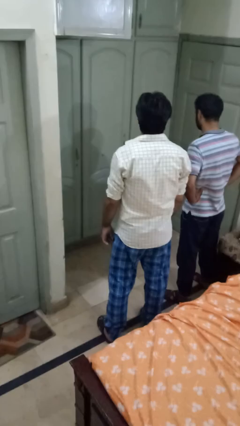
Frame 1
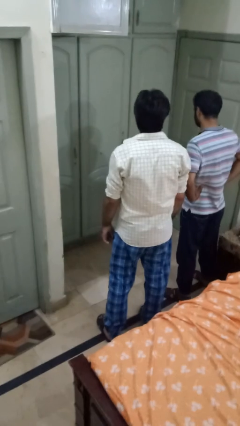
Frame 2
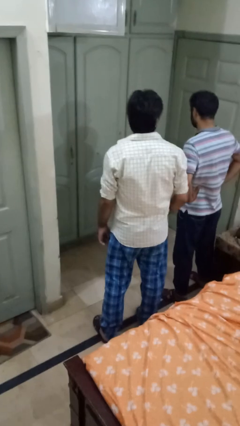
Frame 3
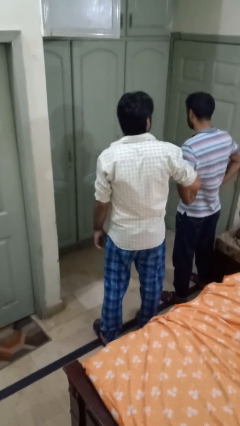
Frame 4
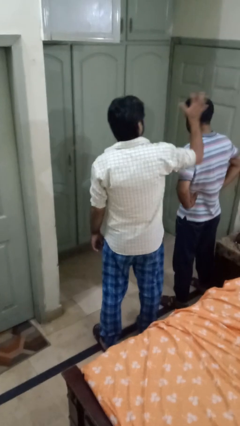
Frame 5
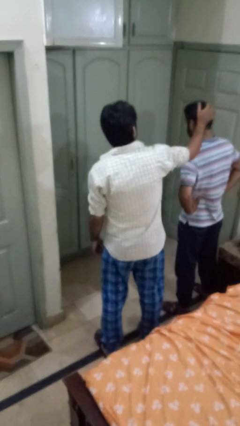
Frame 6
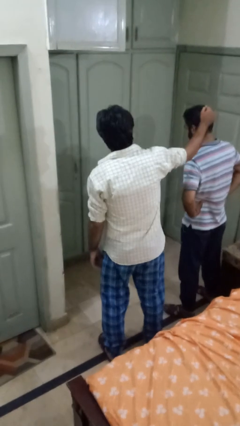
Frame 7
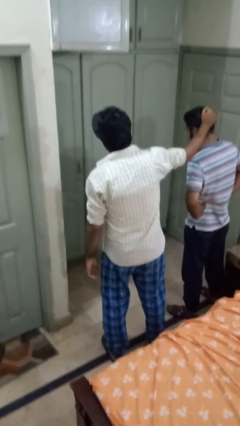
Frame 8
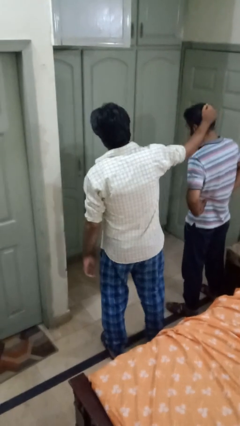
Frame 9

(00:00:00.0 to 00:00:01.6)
person grabs person by hair

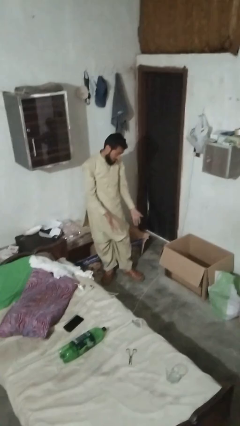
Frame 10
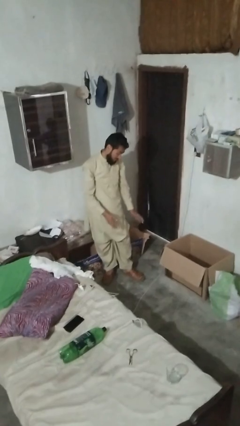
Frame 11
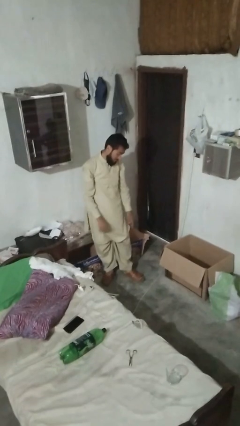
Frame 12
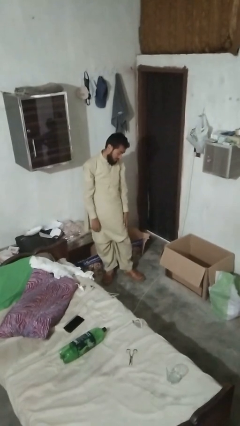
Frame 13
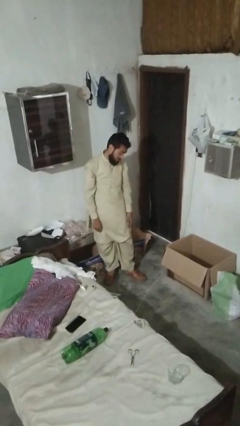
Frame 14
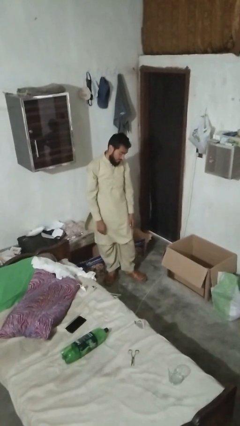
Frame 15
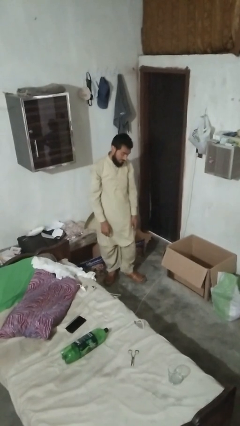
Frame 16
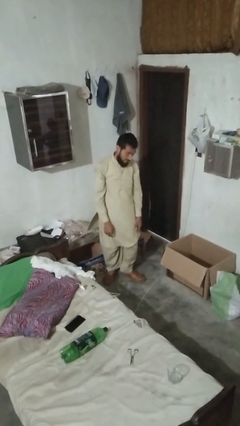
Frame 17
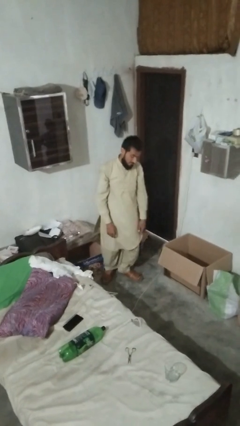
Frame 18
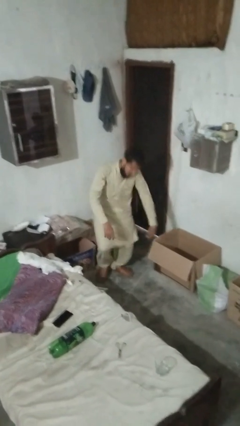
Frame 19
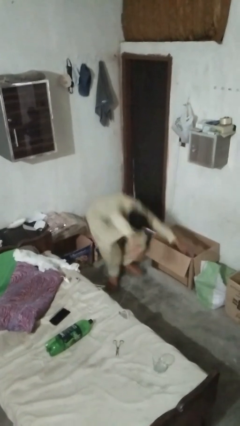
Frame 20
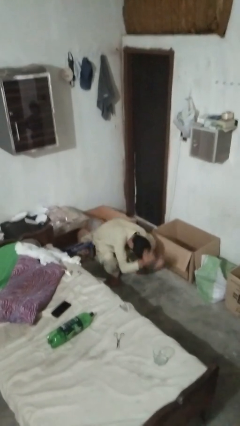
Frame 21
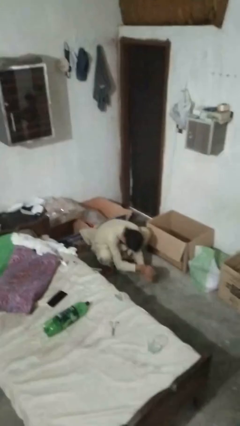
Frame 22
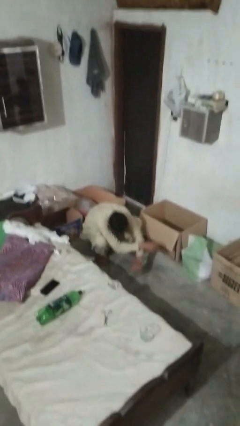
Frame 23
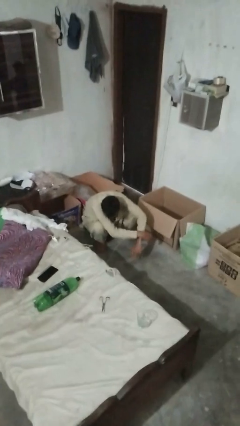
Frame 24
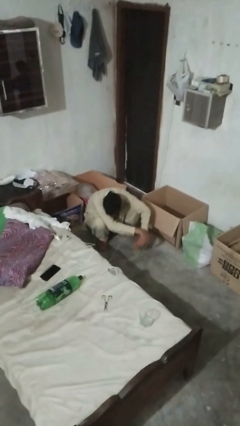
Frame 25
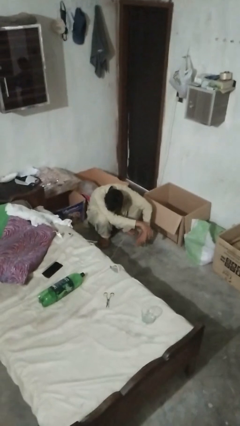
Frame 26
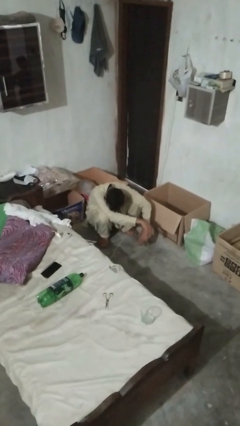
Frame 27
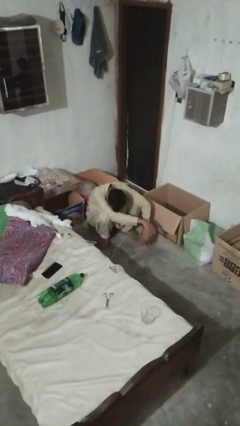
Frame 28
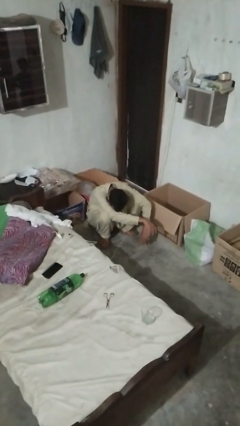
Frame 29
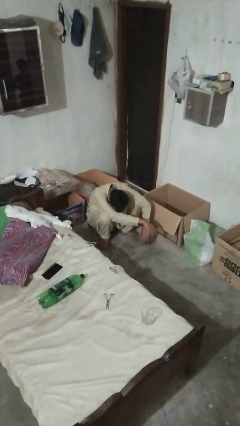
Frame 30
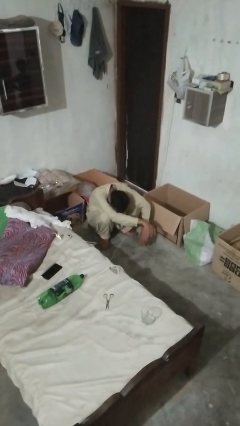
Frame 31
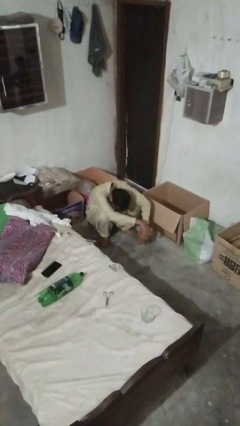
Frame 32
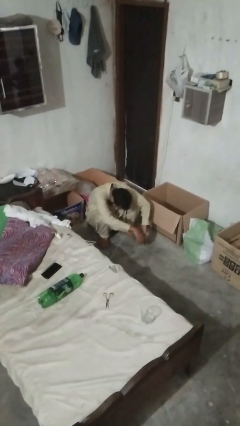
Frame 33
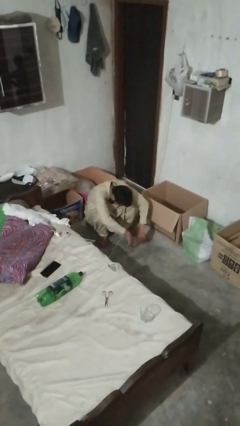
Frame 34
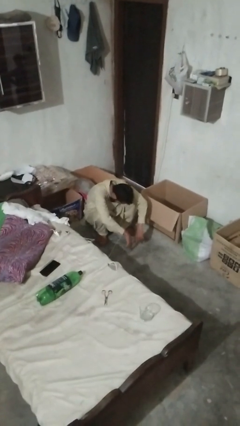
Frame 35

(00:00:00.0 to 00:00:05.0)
person trips on object on floor

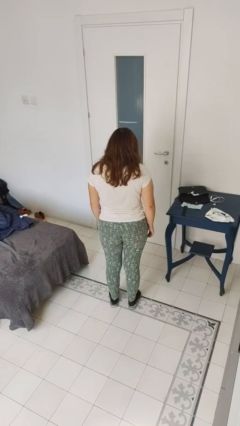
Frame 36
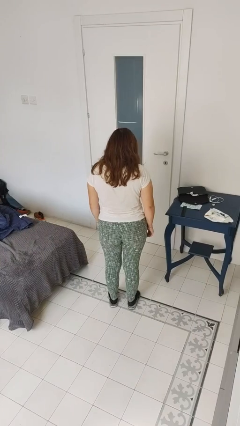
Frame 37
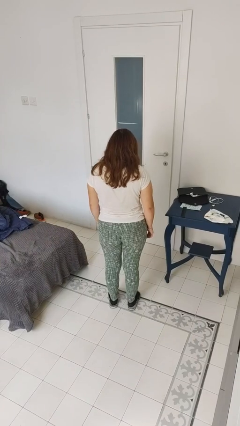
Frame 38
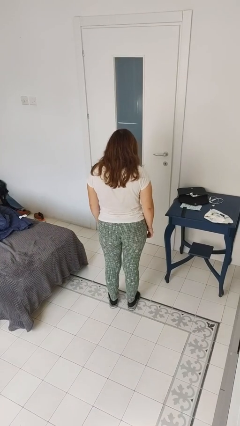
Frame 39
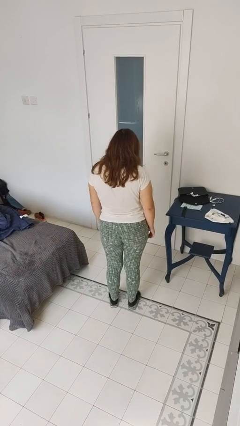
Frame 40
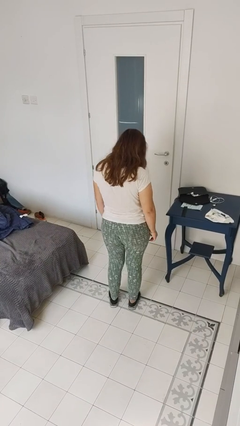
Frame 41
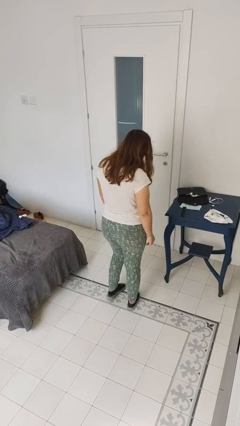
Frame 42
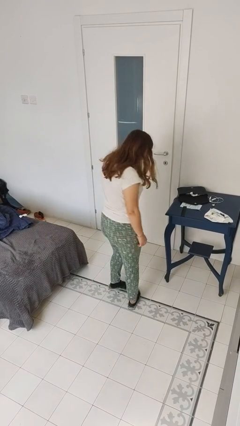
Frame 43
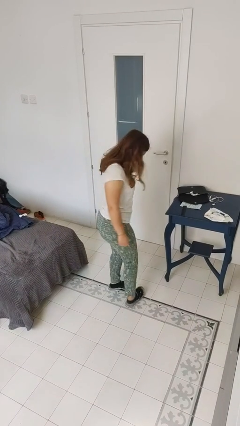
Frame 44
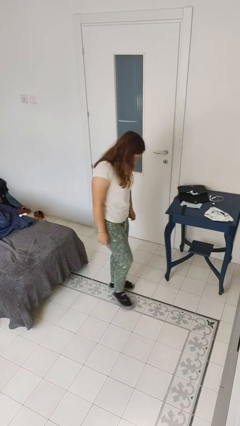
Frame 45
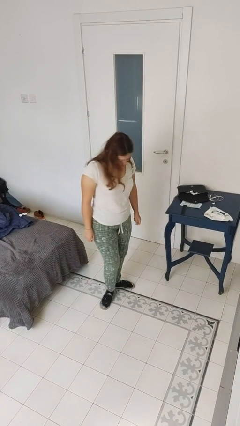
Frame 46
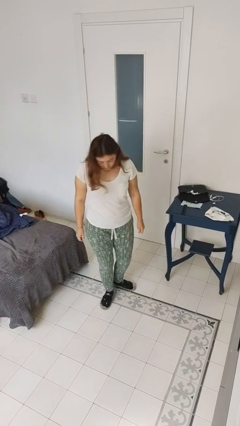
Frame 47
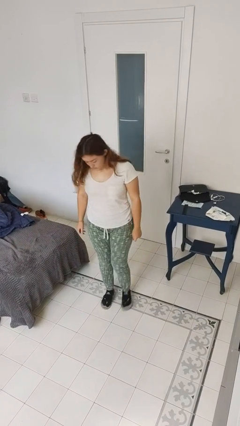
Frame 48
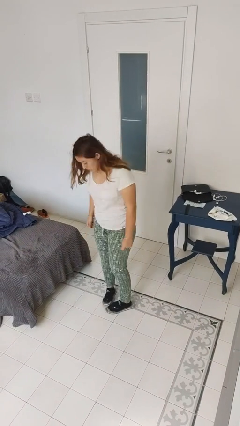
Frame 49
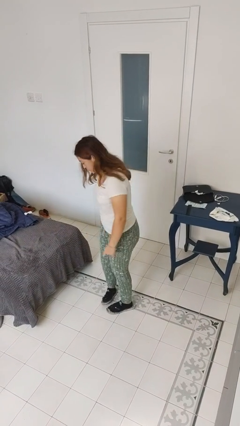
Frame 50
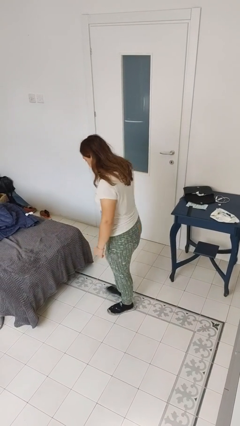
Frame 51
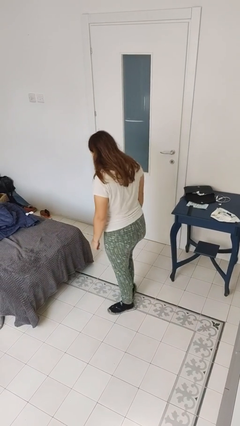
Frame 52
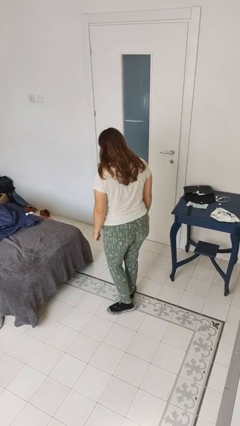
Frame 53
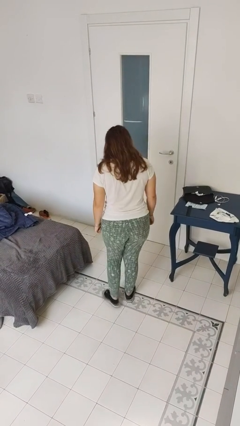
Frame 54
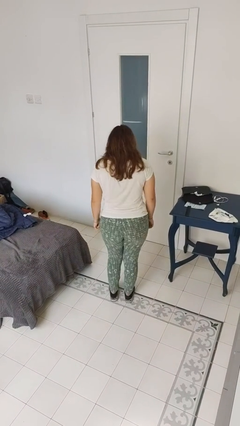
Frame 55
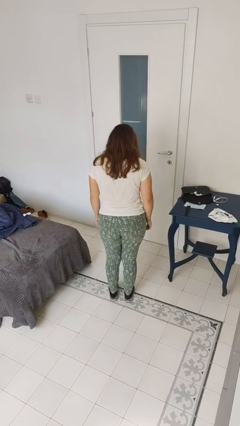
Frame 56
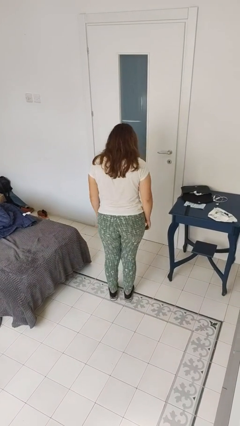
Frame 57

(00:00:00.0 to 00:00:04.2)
person twirls

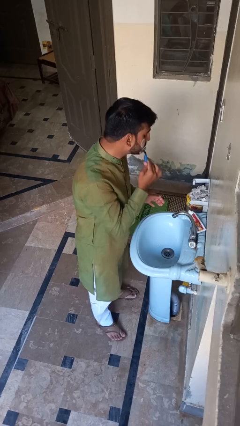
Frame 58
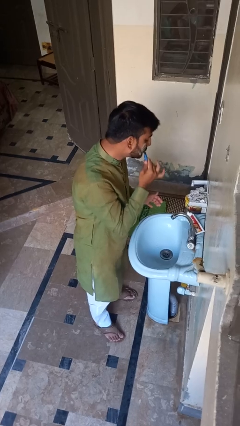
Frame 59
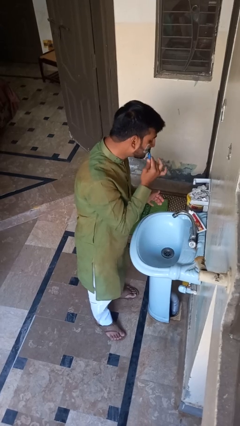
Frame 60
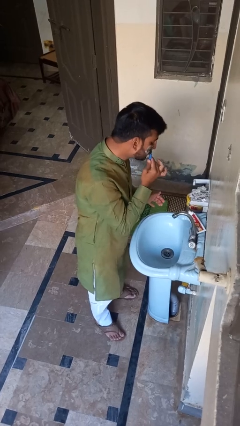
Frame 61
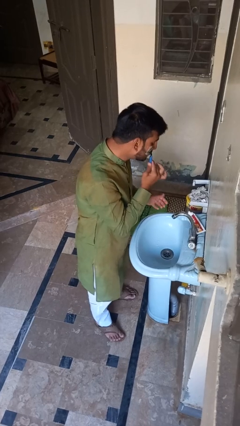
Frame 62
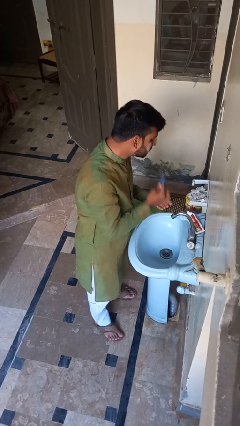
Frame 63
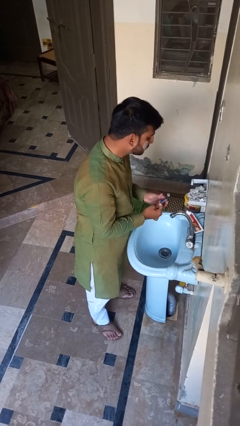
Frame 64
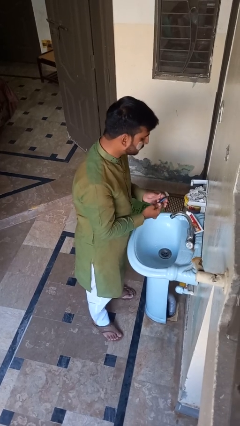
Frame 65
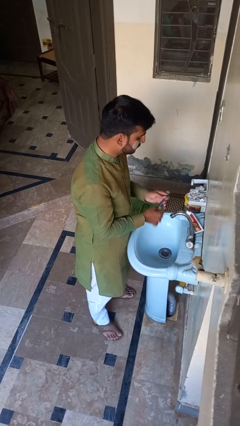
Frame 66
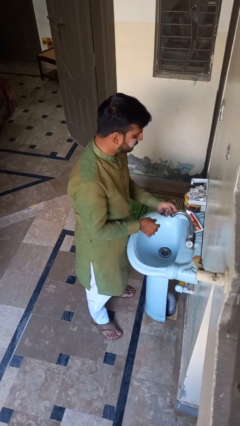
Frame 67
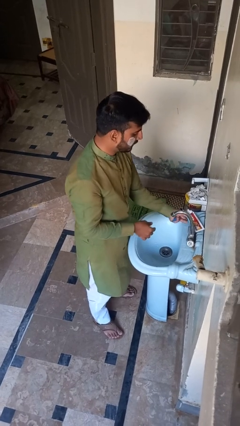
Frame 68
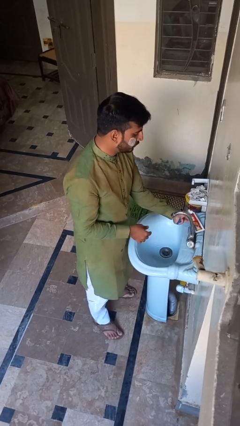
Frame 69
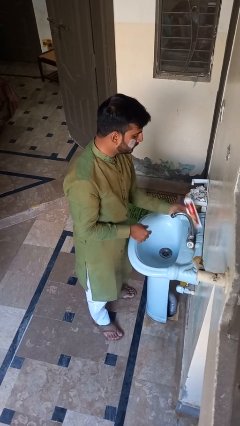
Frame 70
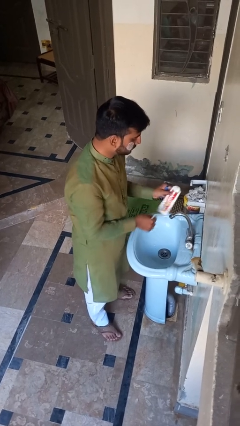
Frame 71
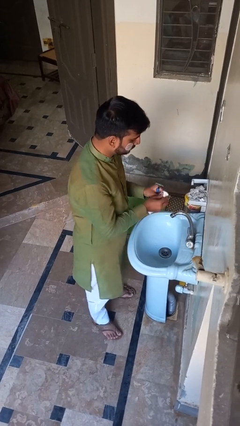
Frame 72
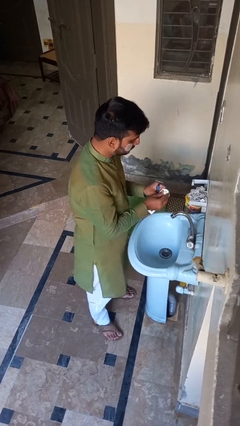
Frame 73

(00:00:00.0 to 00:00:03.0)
person shaves face

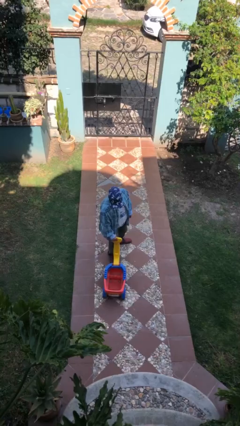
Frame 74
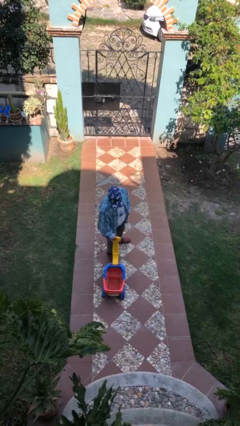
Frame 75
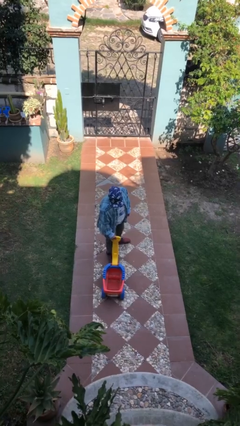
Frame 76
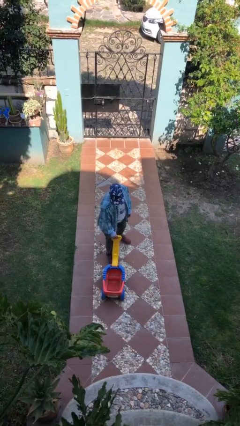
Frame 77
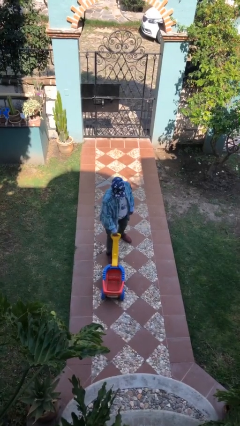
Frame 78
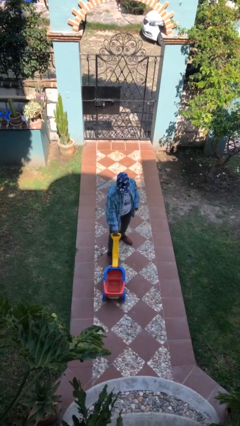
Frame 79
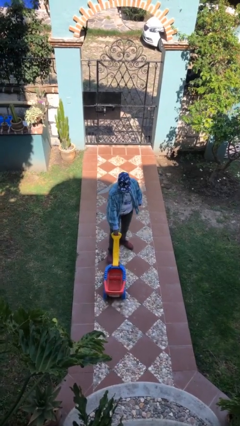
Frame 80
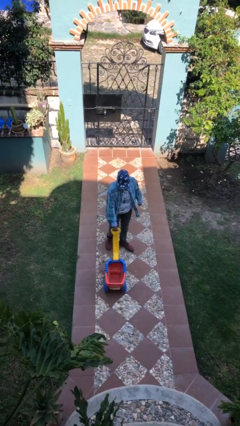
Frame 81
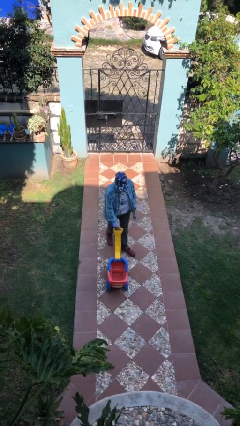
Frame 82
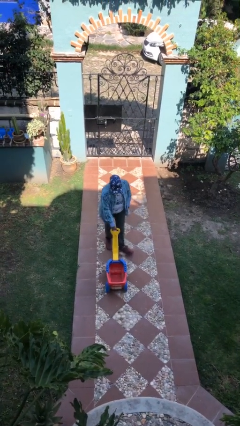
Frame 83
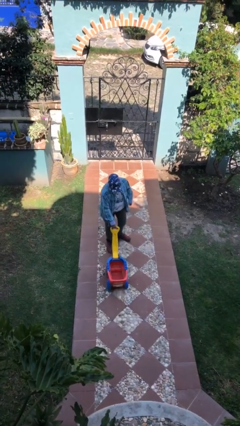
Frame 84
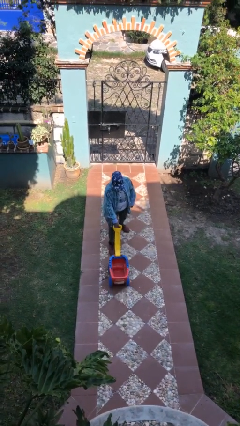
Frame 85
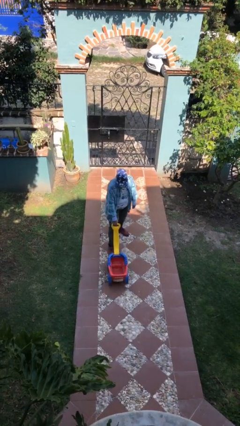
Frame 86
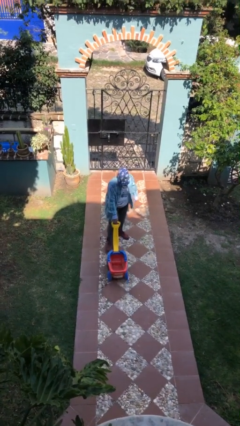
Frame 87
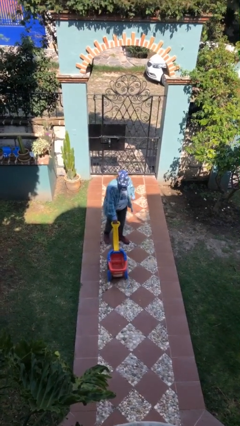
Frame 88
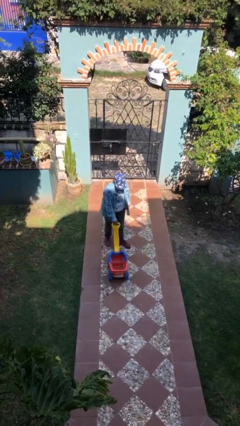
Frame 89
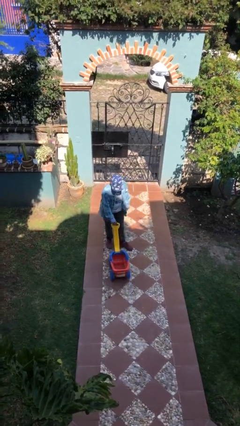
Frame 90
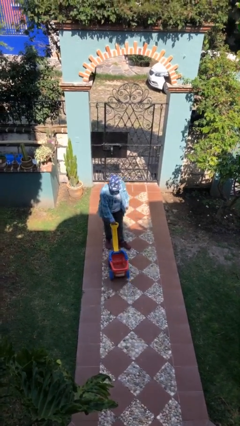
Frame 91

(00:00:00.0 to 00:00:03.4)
person pulls wheeled cart

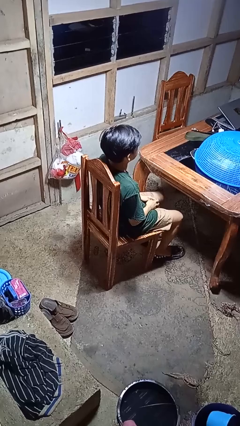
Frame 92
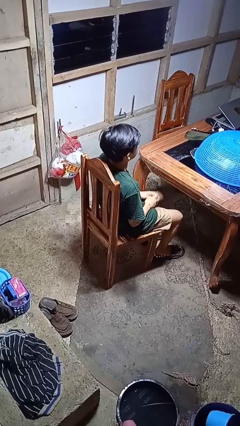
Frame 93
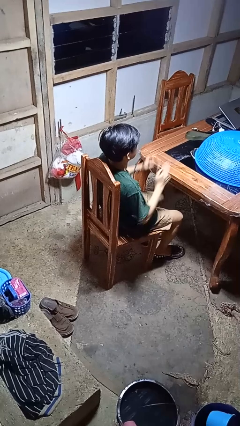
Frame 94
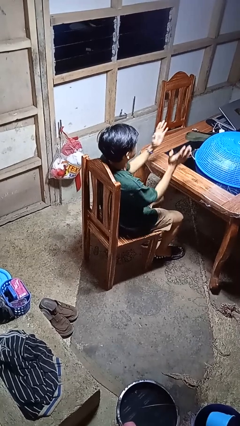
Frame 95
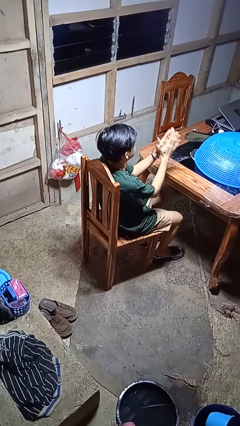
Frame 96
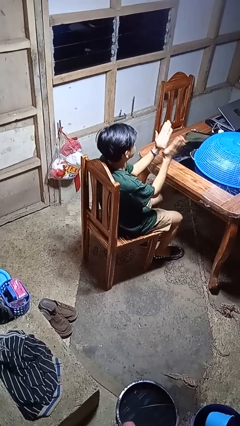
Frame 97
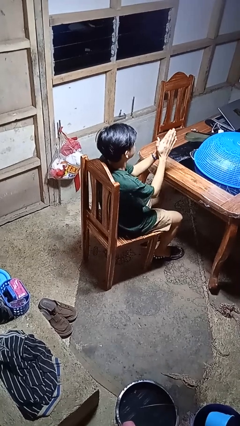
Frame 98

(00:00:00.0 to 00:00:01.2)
person claps hands
